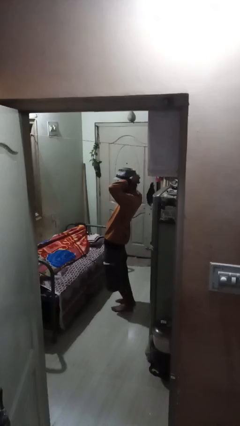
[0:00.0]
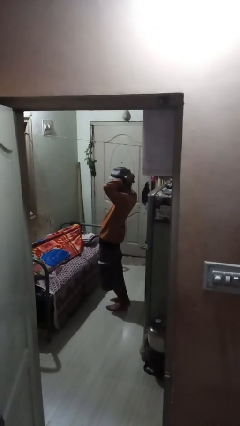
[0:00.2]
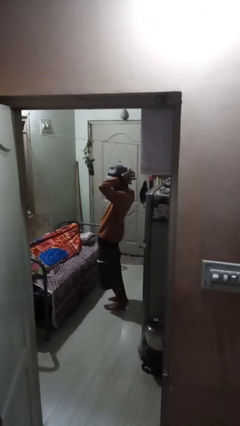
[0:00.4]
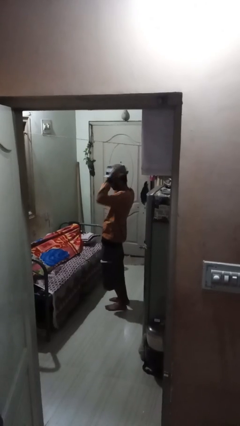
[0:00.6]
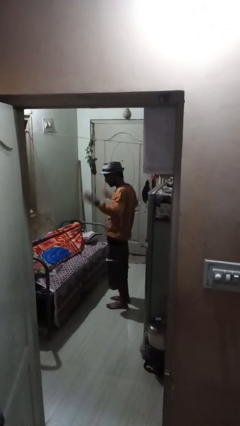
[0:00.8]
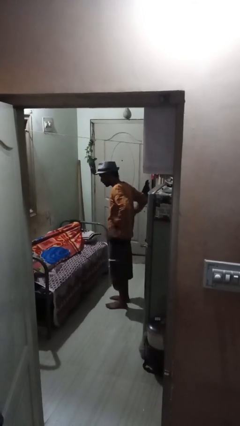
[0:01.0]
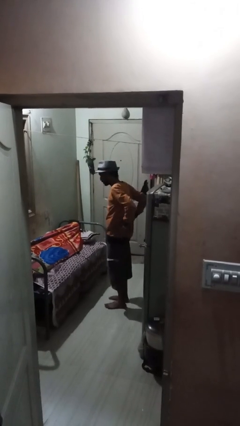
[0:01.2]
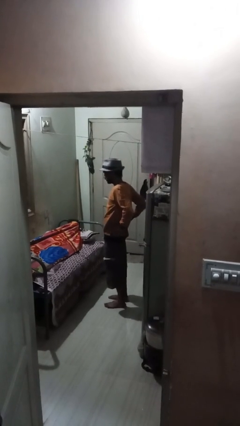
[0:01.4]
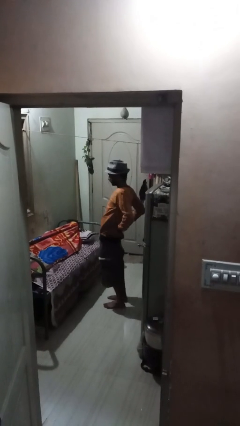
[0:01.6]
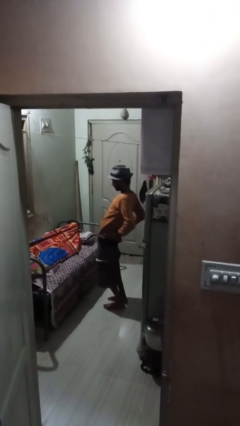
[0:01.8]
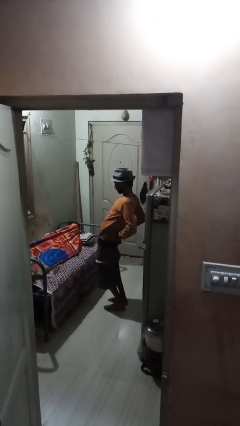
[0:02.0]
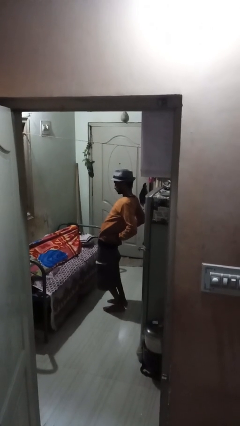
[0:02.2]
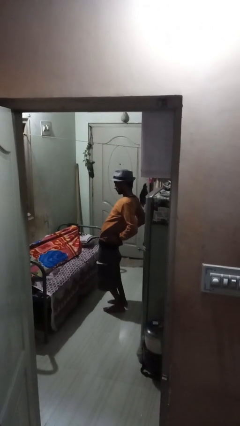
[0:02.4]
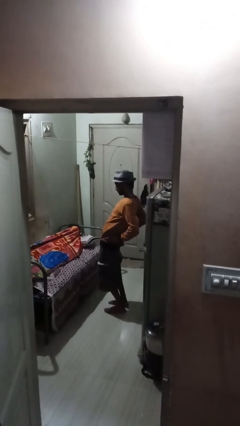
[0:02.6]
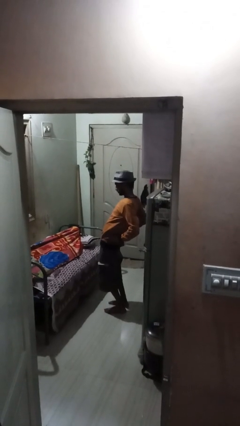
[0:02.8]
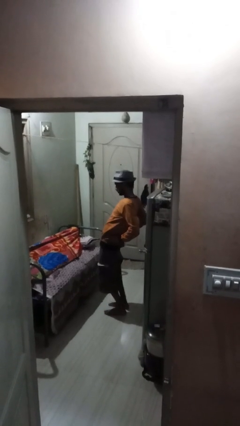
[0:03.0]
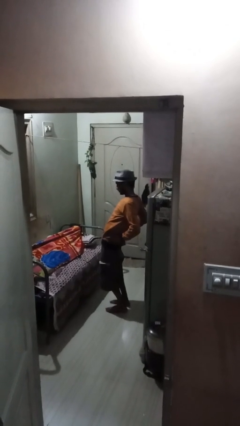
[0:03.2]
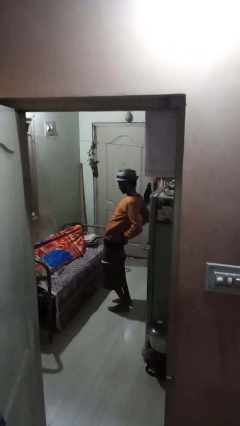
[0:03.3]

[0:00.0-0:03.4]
person stretches back

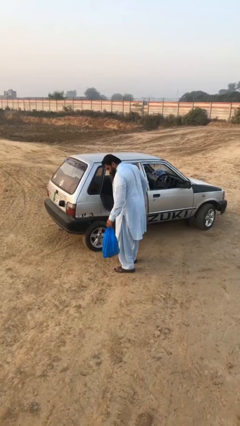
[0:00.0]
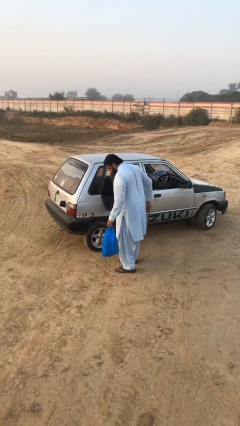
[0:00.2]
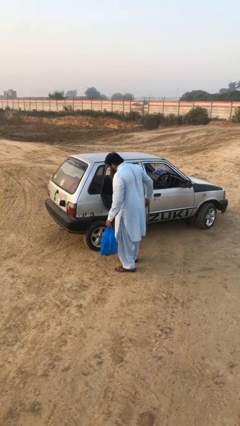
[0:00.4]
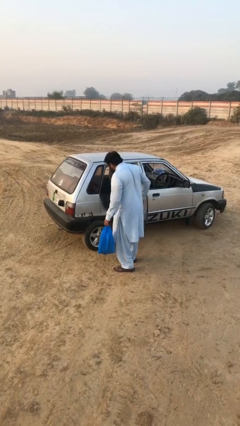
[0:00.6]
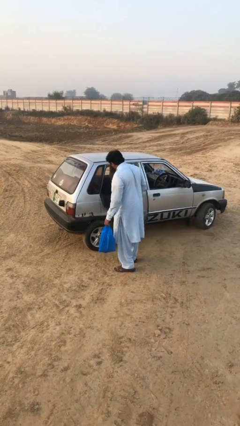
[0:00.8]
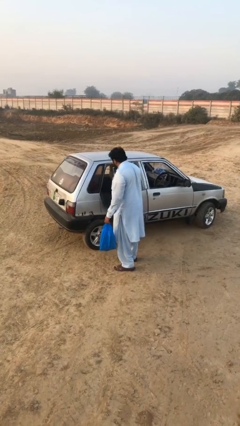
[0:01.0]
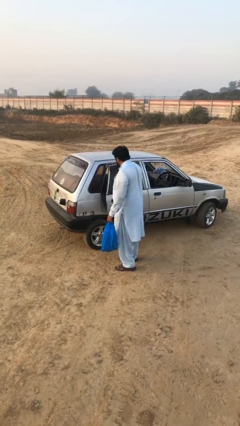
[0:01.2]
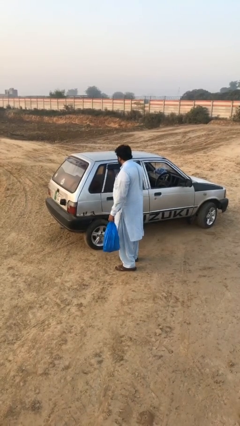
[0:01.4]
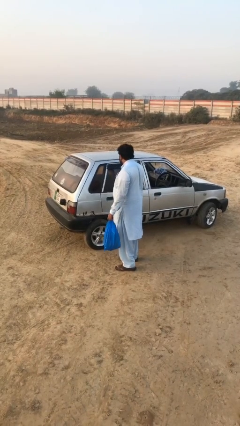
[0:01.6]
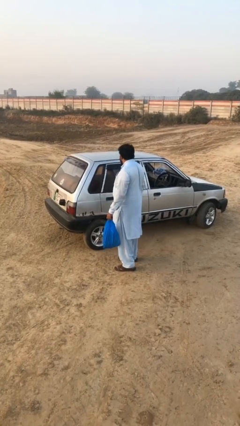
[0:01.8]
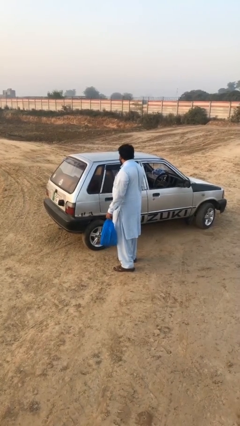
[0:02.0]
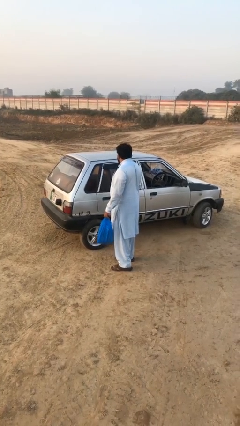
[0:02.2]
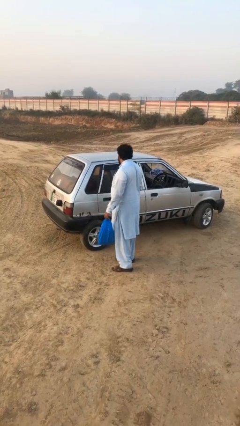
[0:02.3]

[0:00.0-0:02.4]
person closes car door

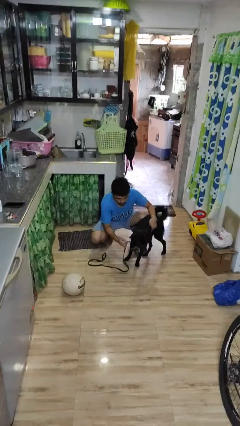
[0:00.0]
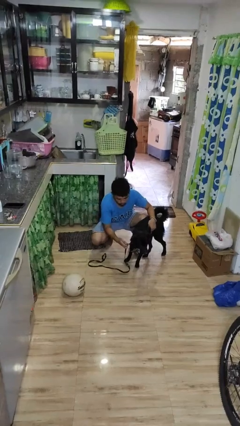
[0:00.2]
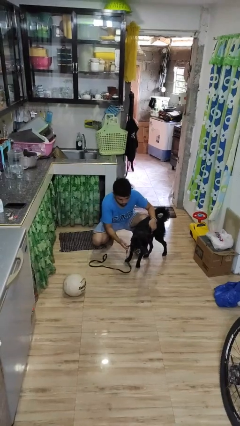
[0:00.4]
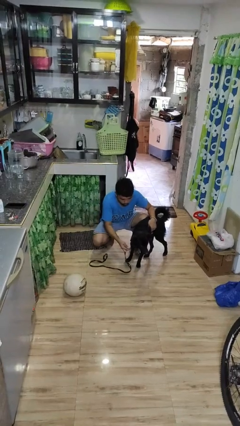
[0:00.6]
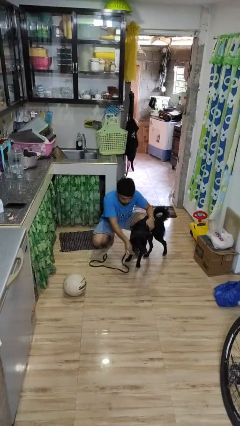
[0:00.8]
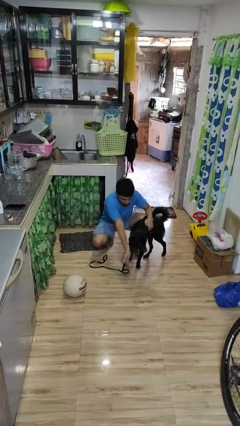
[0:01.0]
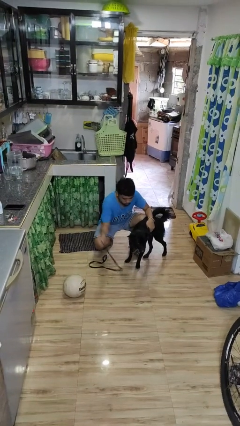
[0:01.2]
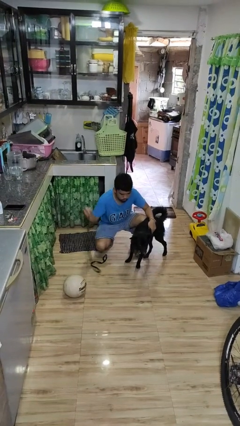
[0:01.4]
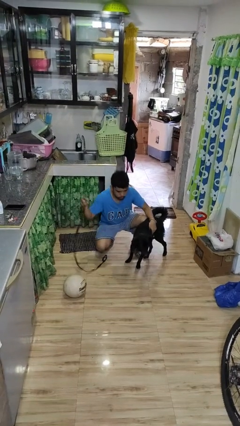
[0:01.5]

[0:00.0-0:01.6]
person unattaches leash from dog

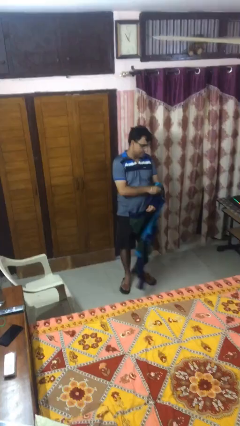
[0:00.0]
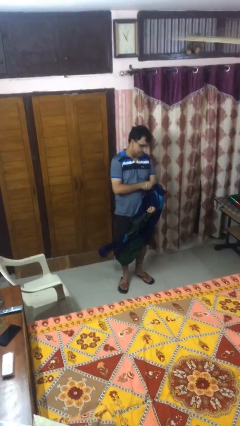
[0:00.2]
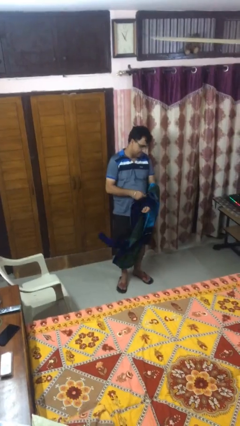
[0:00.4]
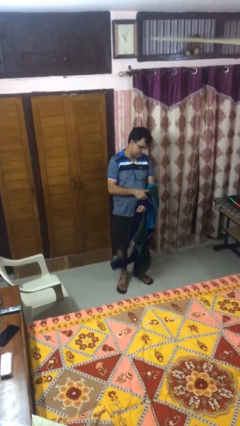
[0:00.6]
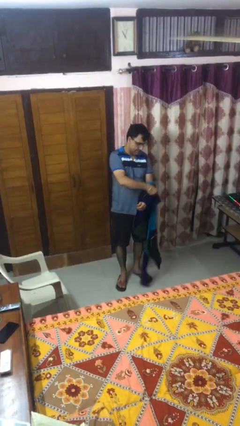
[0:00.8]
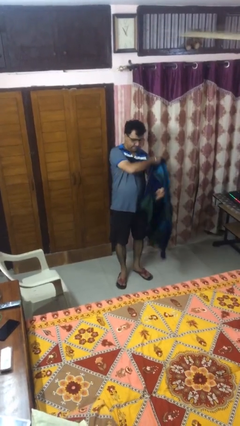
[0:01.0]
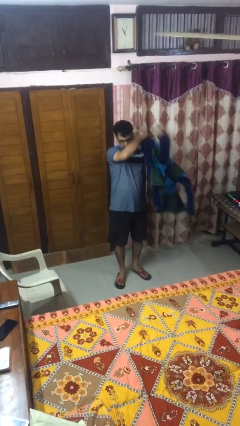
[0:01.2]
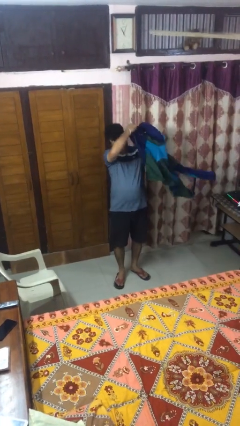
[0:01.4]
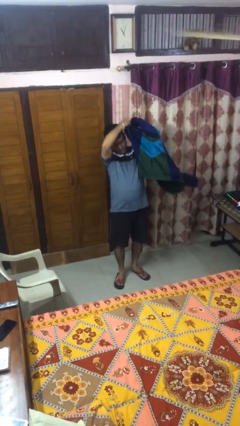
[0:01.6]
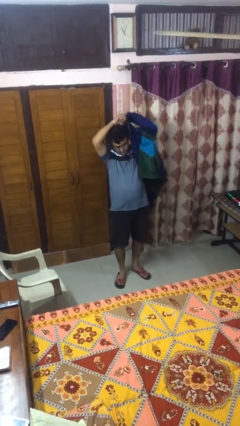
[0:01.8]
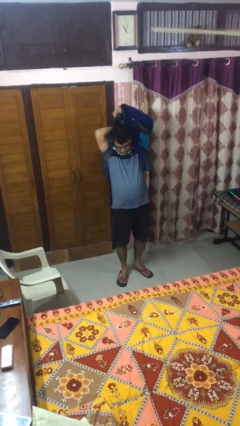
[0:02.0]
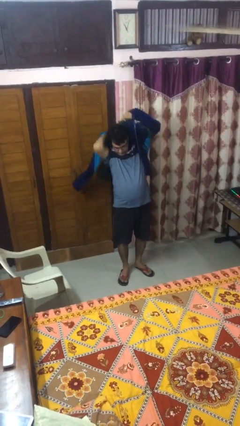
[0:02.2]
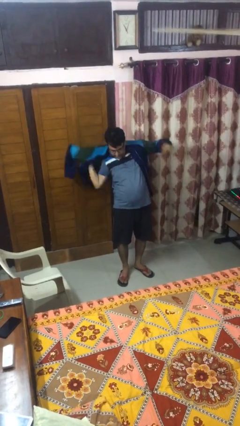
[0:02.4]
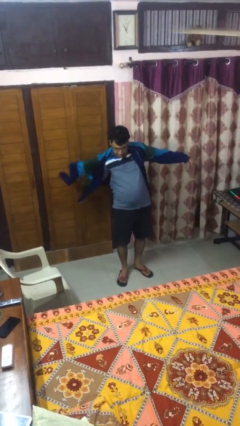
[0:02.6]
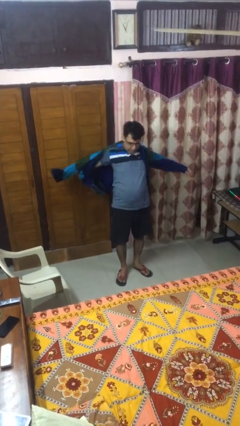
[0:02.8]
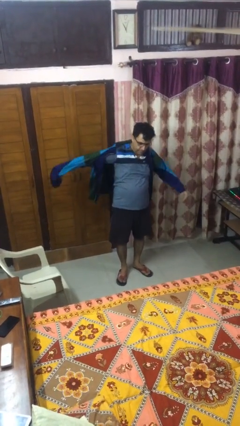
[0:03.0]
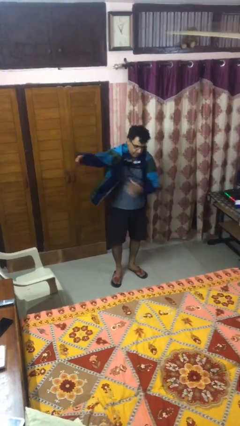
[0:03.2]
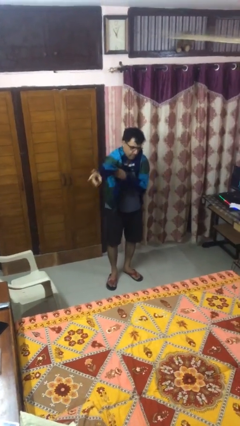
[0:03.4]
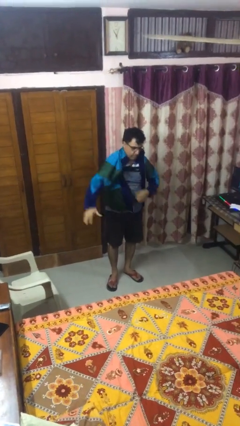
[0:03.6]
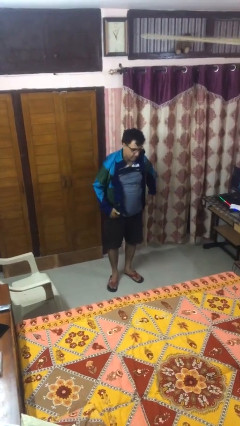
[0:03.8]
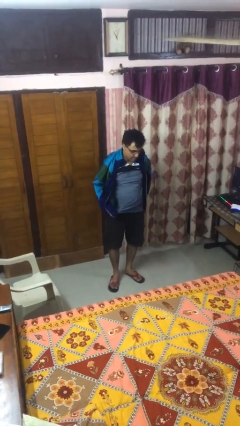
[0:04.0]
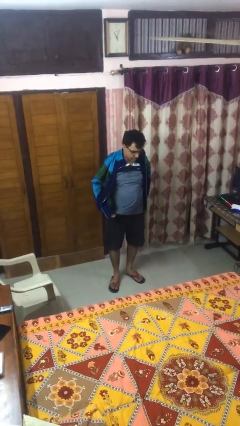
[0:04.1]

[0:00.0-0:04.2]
person puts on jacket

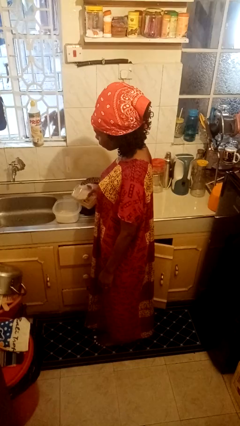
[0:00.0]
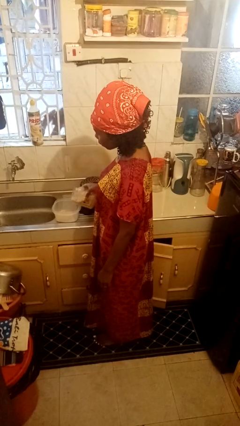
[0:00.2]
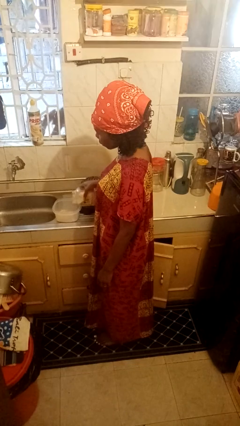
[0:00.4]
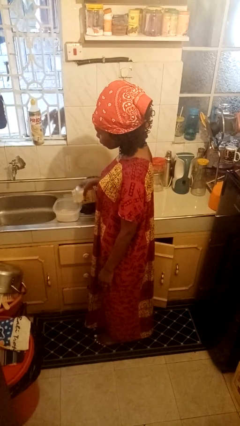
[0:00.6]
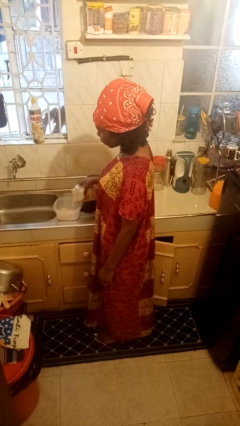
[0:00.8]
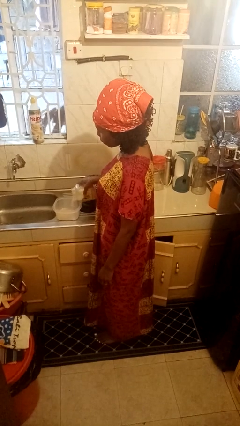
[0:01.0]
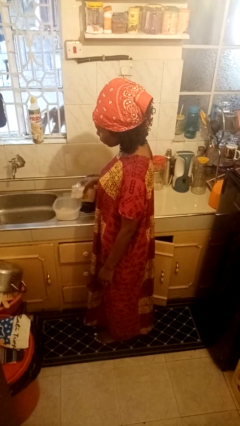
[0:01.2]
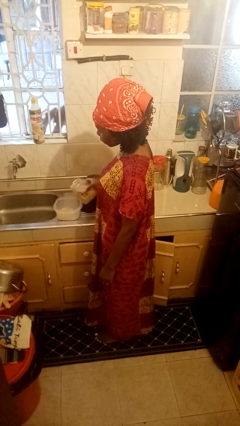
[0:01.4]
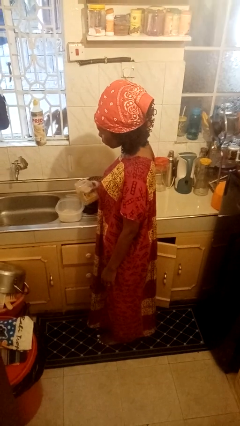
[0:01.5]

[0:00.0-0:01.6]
person pours into bowl

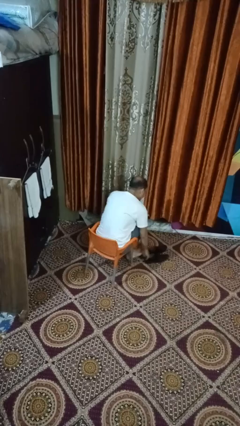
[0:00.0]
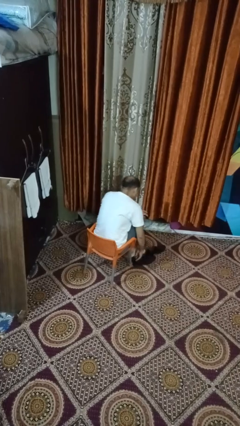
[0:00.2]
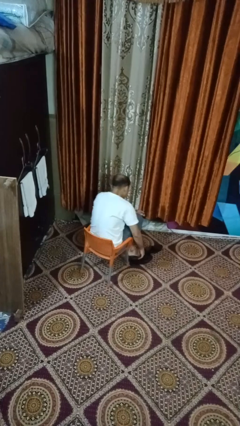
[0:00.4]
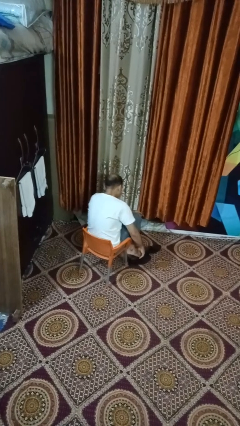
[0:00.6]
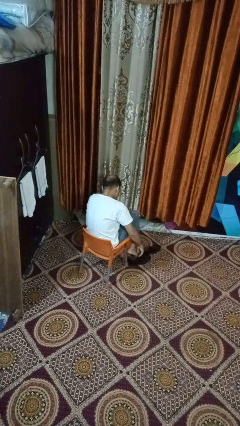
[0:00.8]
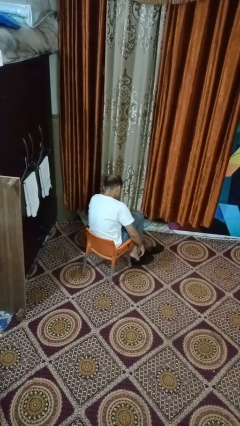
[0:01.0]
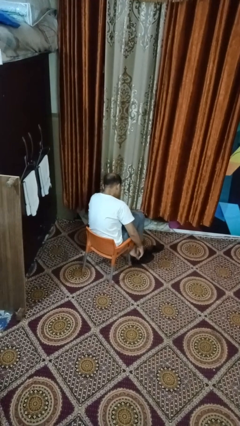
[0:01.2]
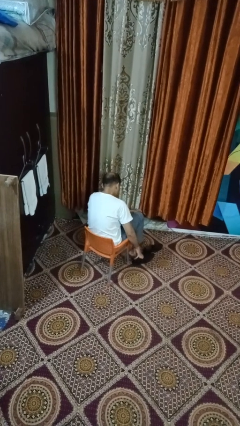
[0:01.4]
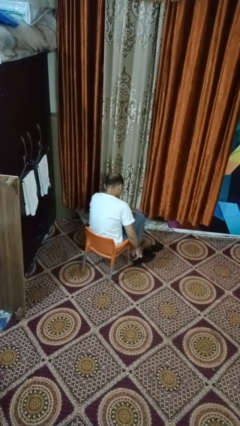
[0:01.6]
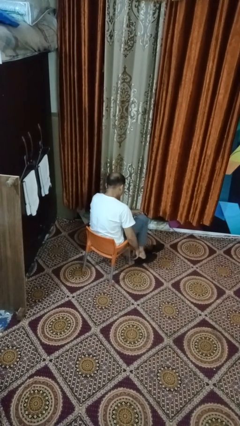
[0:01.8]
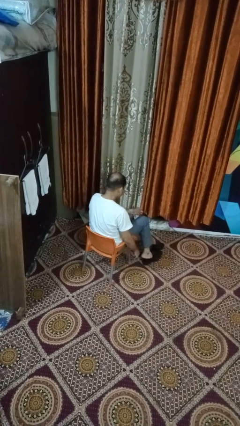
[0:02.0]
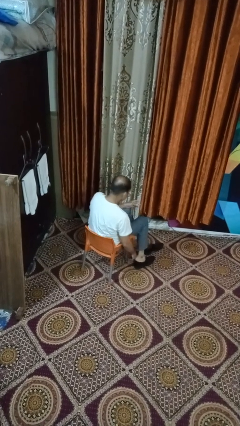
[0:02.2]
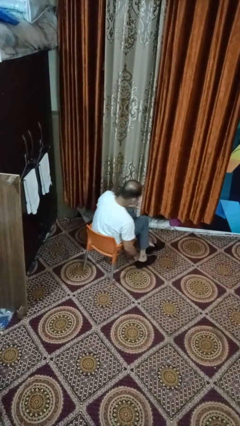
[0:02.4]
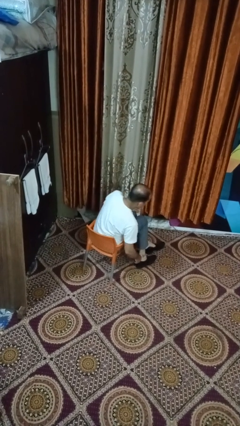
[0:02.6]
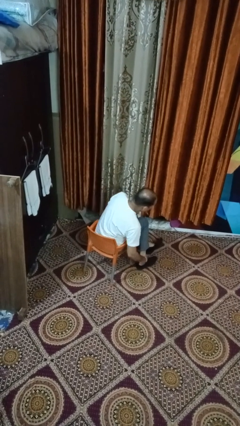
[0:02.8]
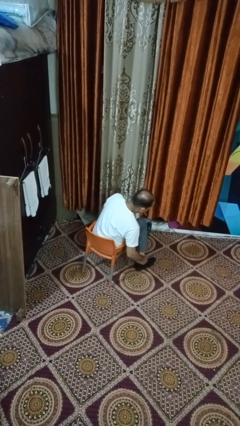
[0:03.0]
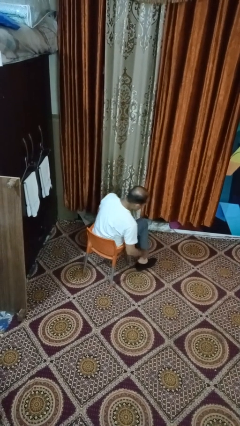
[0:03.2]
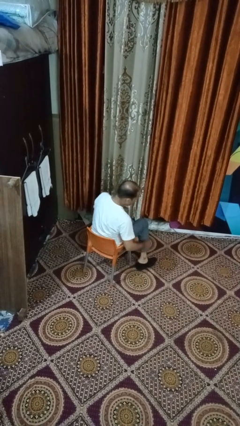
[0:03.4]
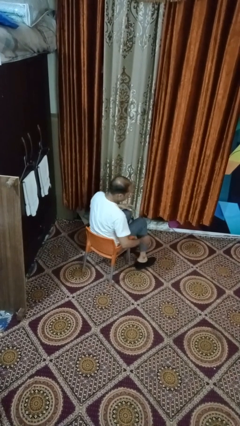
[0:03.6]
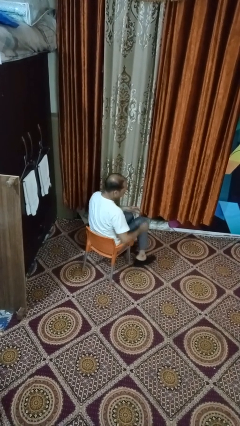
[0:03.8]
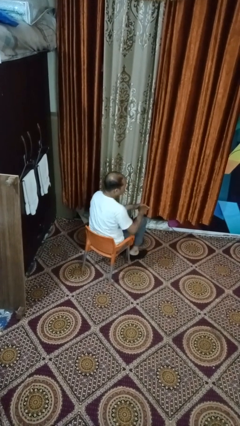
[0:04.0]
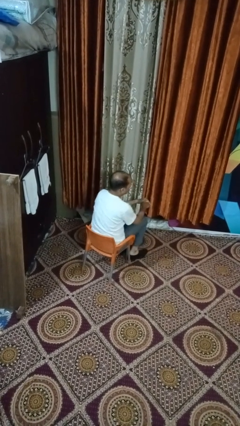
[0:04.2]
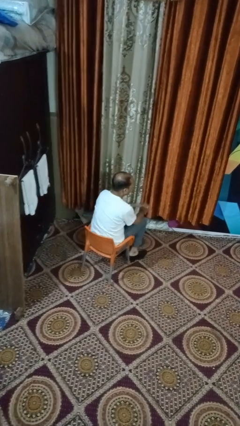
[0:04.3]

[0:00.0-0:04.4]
person puts on shoes
